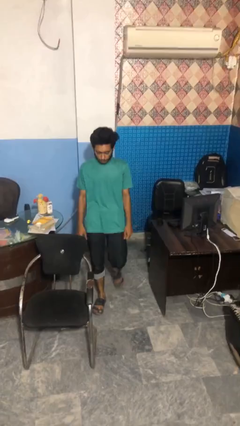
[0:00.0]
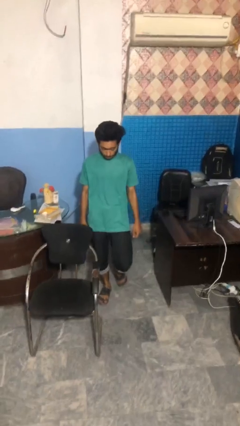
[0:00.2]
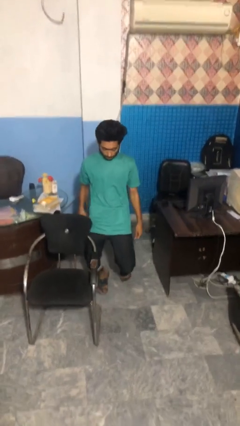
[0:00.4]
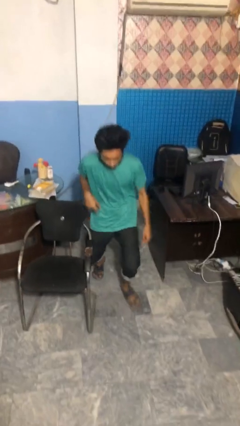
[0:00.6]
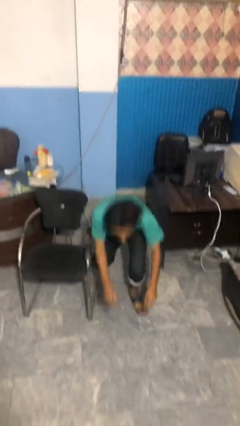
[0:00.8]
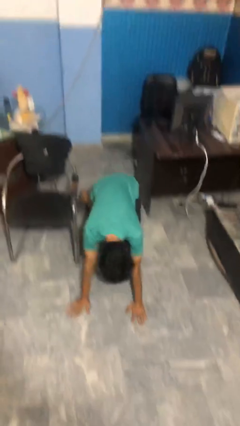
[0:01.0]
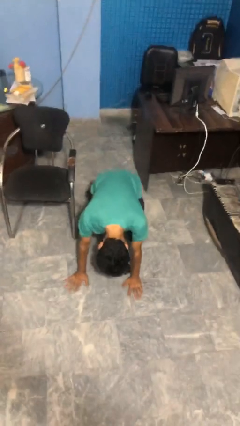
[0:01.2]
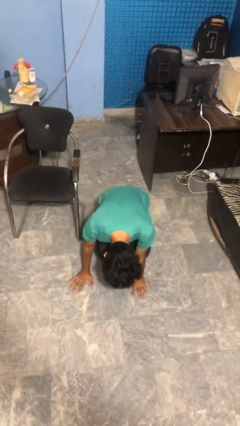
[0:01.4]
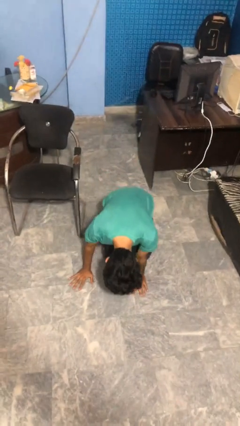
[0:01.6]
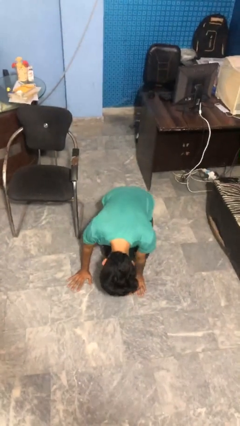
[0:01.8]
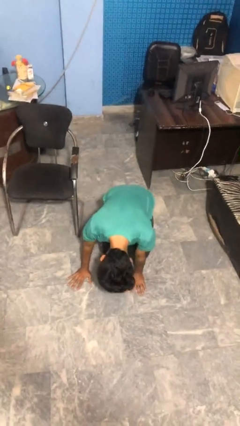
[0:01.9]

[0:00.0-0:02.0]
person trips on object on floor

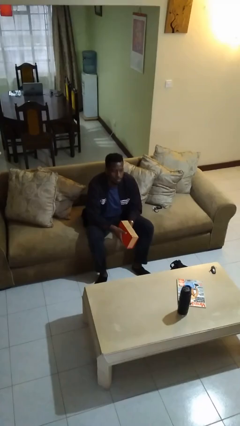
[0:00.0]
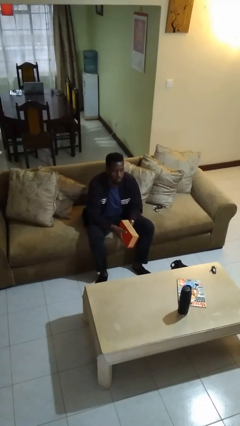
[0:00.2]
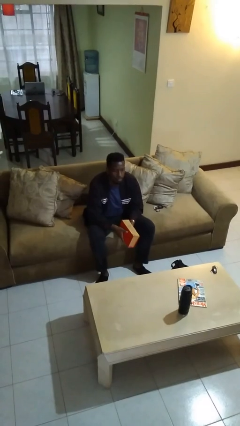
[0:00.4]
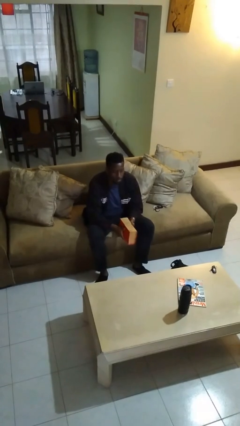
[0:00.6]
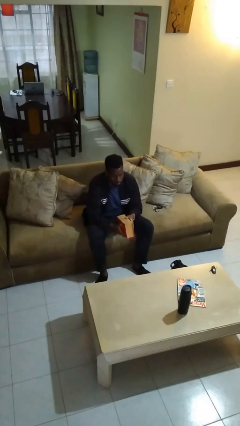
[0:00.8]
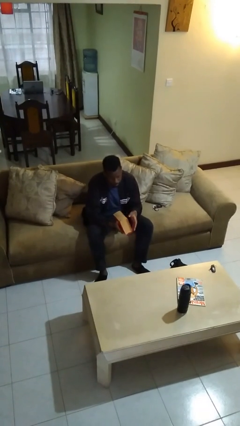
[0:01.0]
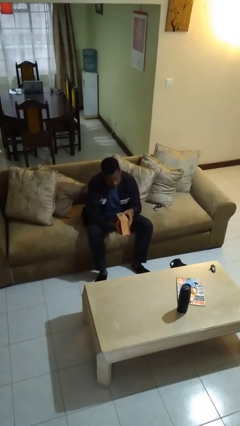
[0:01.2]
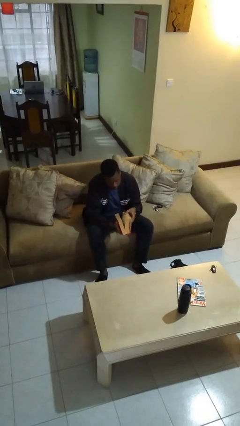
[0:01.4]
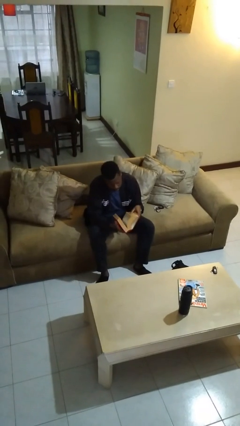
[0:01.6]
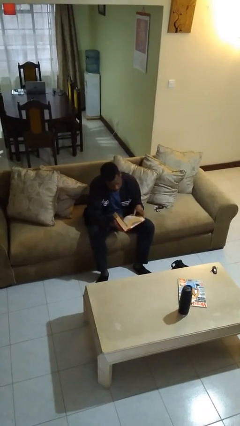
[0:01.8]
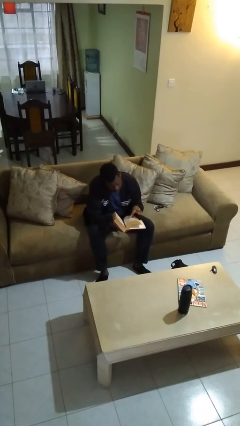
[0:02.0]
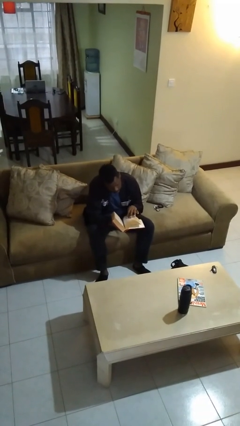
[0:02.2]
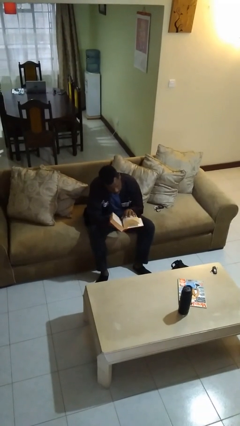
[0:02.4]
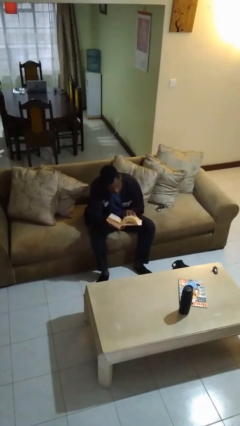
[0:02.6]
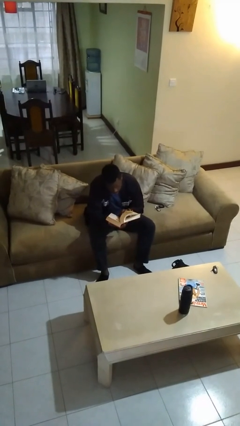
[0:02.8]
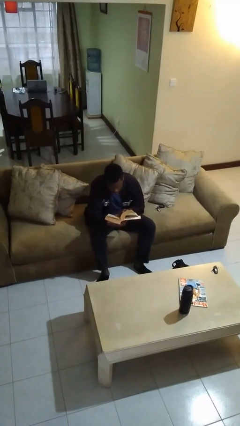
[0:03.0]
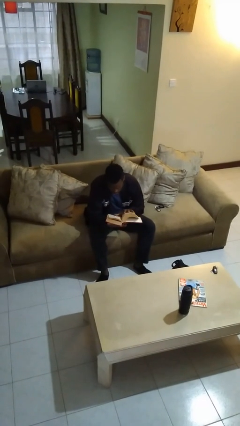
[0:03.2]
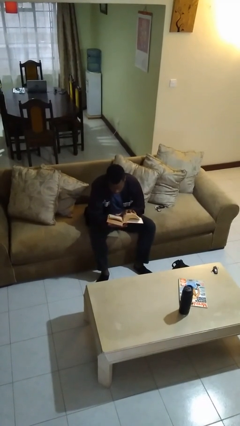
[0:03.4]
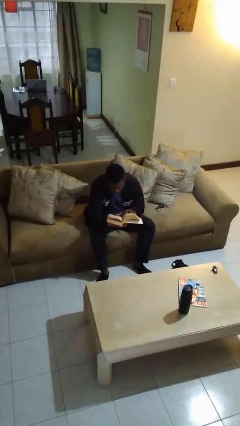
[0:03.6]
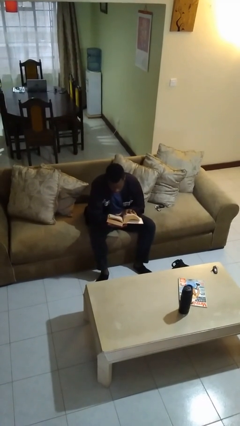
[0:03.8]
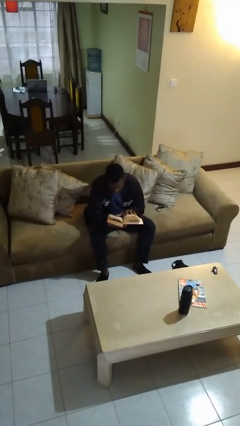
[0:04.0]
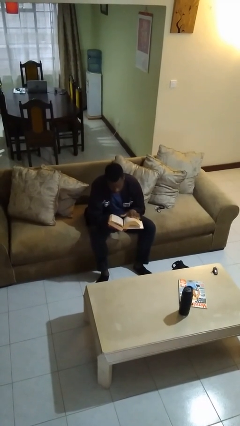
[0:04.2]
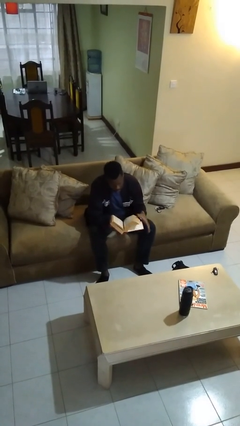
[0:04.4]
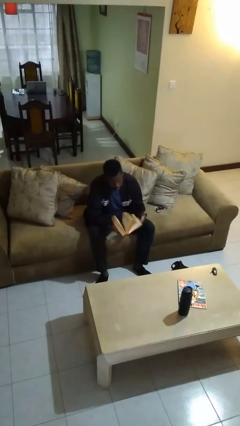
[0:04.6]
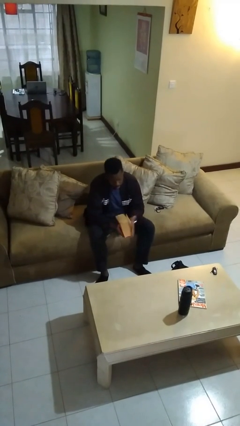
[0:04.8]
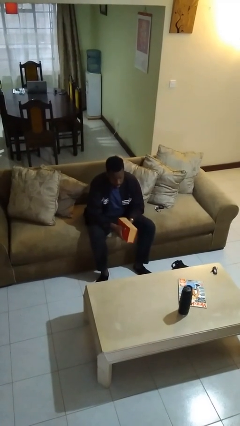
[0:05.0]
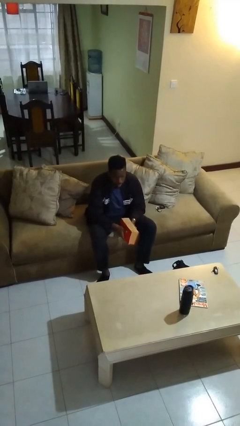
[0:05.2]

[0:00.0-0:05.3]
person reads book

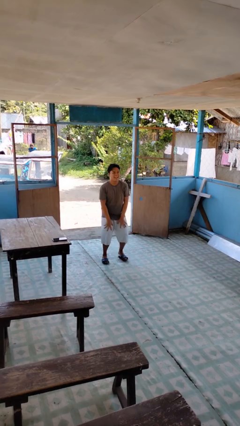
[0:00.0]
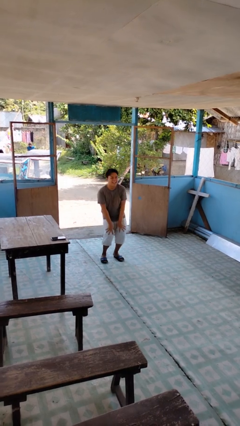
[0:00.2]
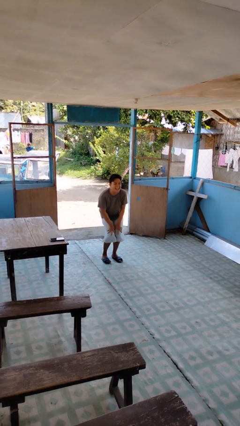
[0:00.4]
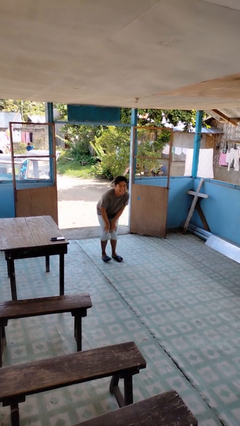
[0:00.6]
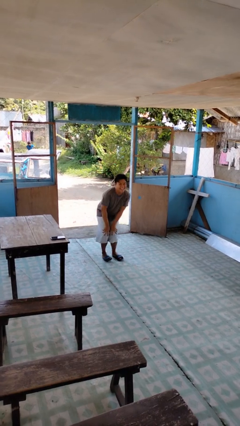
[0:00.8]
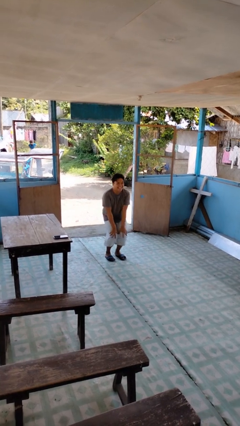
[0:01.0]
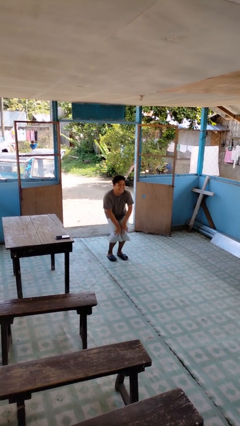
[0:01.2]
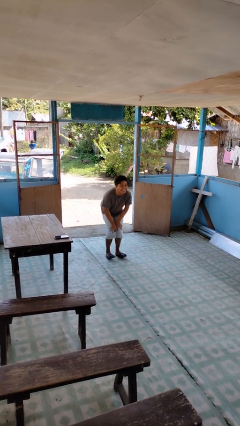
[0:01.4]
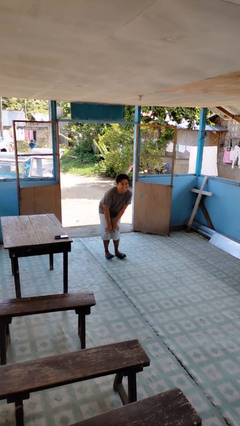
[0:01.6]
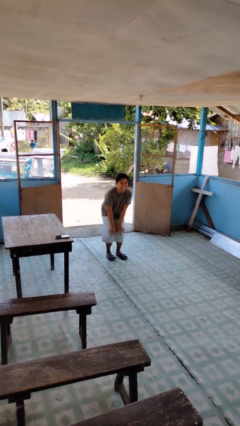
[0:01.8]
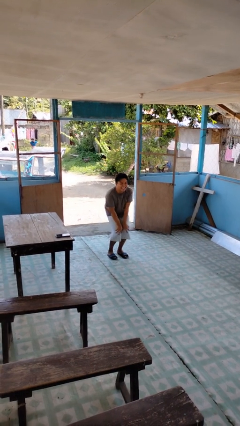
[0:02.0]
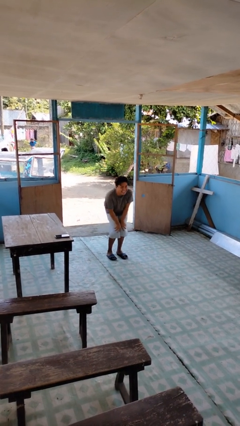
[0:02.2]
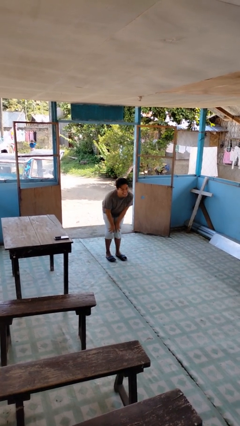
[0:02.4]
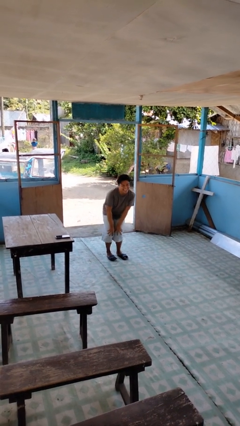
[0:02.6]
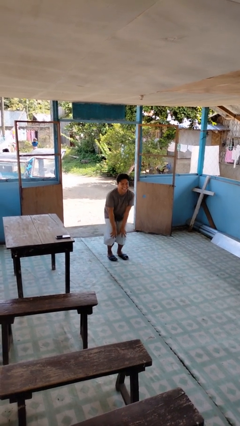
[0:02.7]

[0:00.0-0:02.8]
person dances in place

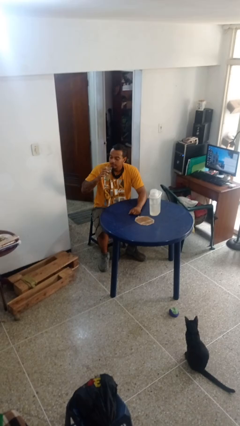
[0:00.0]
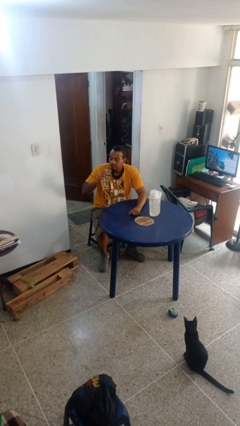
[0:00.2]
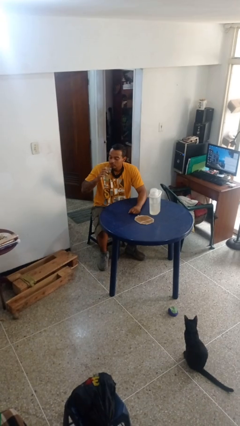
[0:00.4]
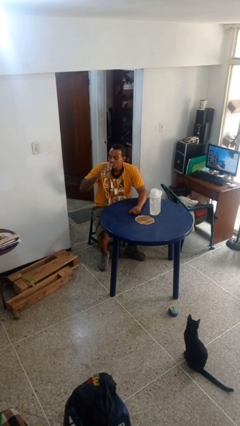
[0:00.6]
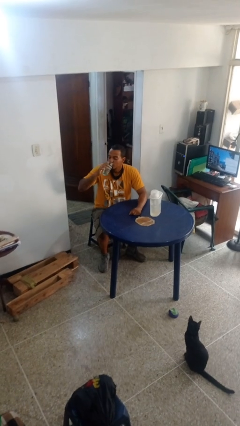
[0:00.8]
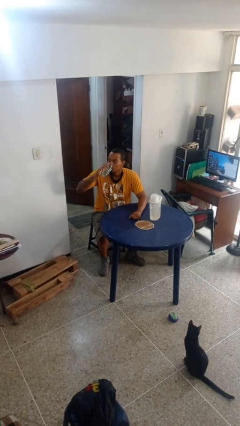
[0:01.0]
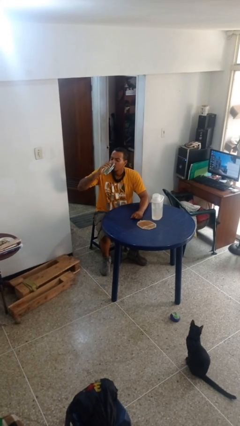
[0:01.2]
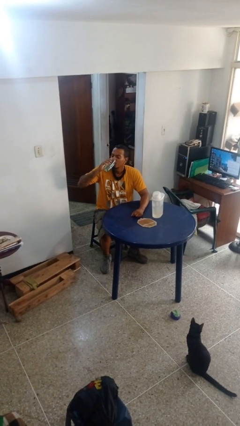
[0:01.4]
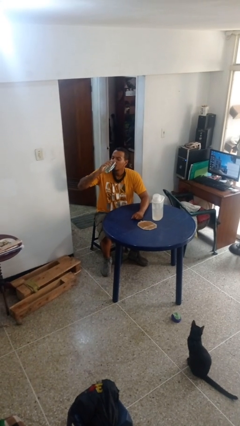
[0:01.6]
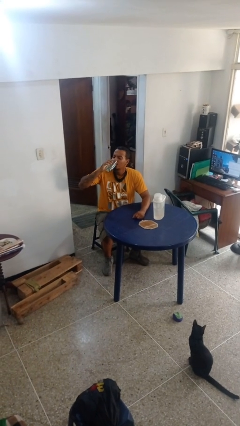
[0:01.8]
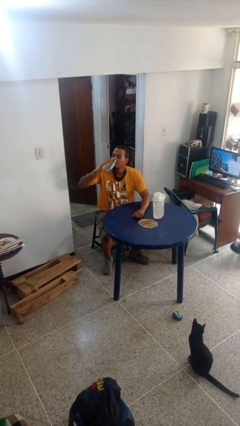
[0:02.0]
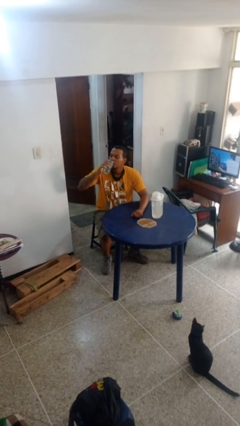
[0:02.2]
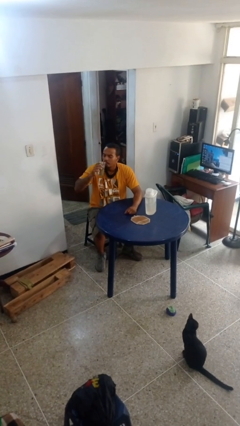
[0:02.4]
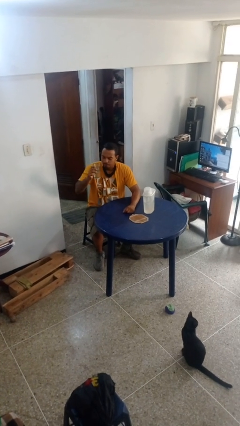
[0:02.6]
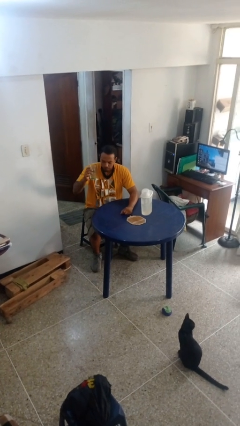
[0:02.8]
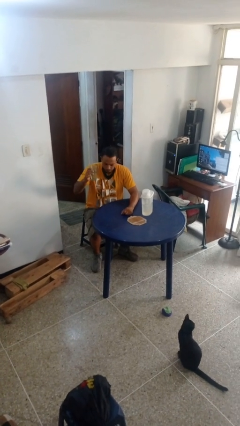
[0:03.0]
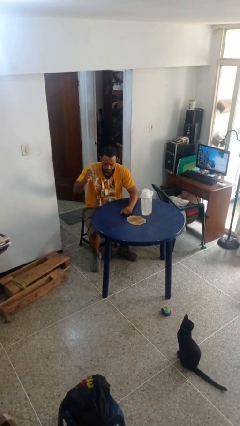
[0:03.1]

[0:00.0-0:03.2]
person drinks from mug

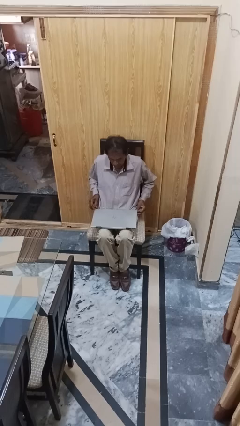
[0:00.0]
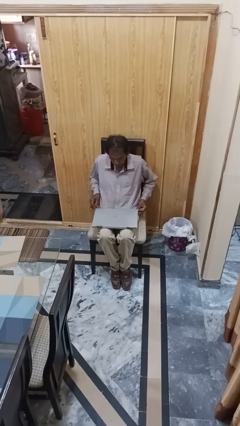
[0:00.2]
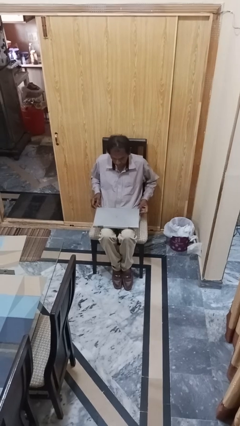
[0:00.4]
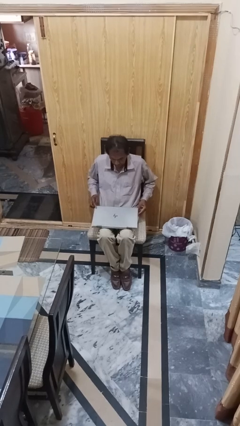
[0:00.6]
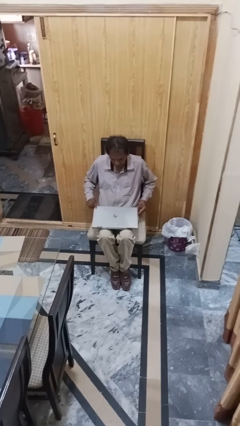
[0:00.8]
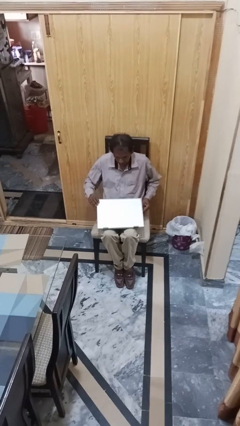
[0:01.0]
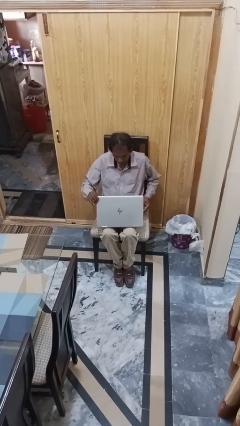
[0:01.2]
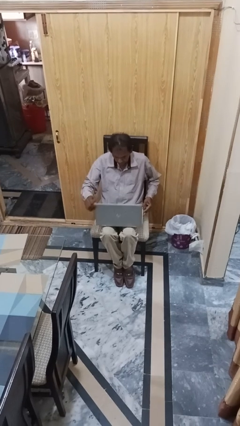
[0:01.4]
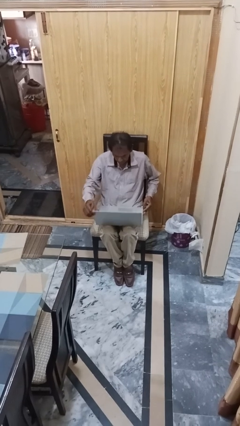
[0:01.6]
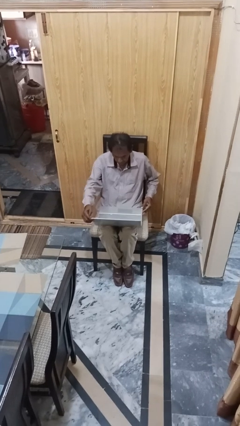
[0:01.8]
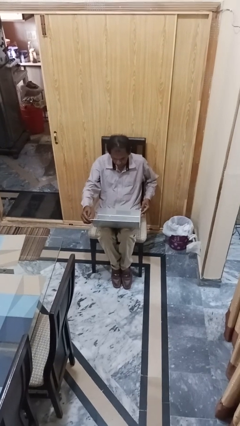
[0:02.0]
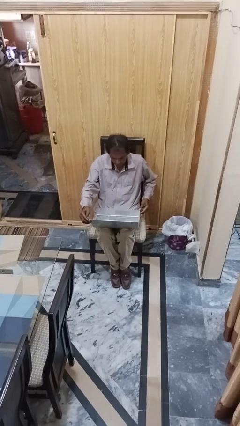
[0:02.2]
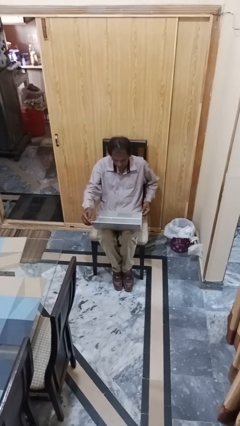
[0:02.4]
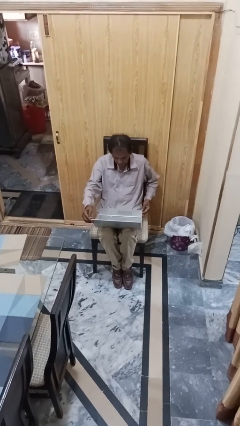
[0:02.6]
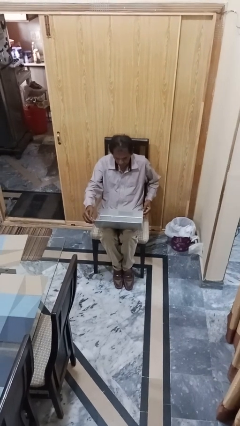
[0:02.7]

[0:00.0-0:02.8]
person opens laptop

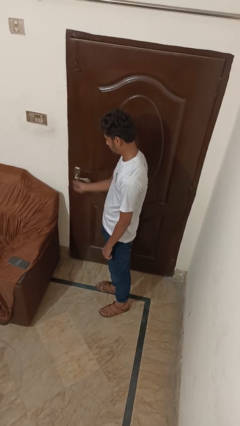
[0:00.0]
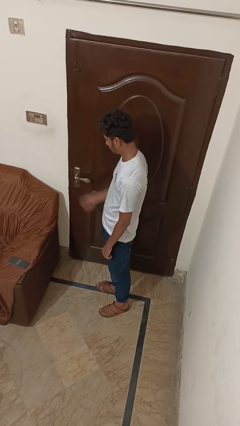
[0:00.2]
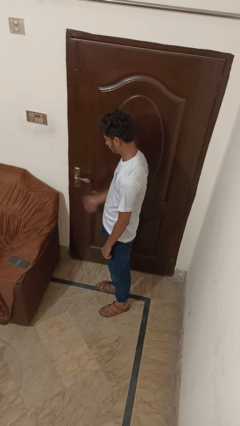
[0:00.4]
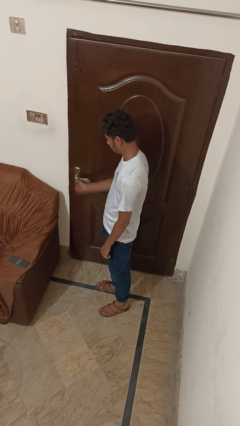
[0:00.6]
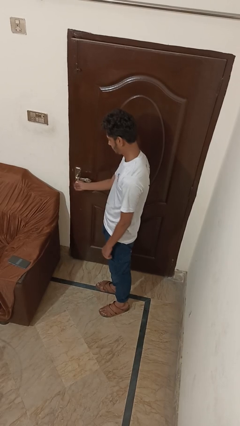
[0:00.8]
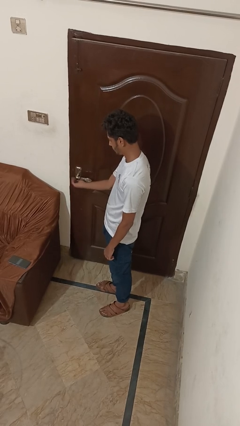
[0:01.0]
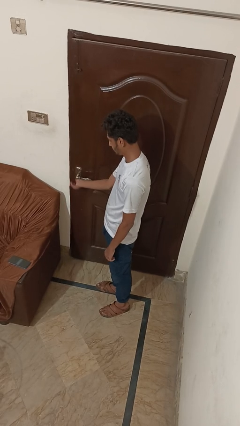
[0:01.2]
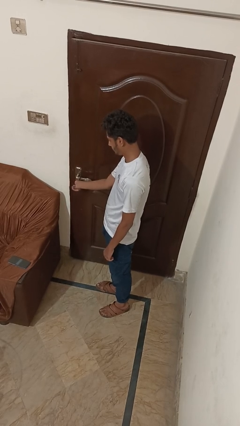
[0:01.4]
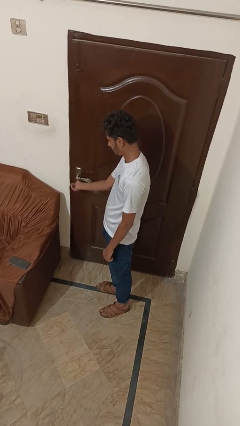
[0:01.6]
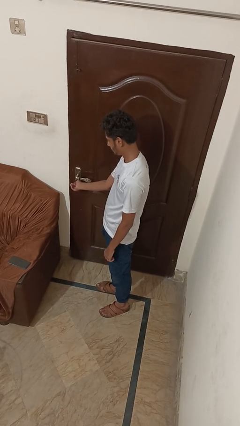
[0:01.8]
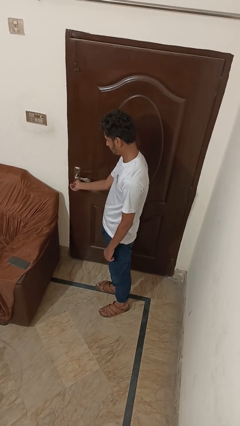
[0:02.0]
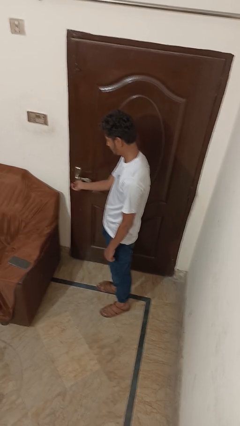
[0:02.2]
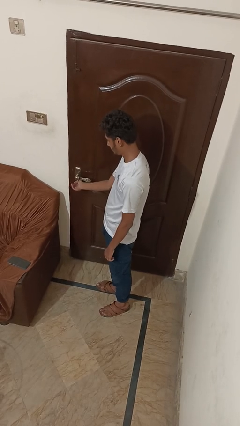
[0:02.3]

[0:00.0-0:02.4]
person unlocks door with keys
